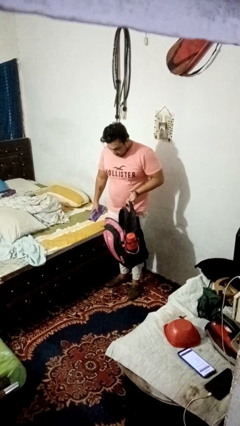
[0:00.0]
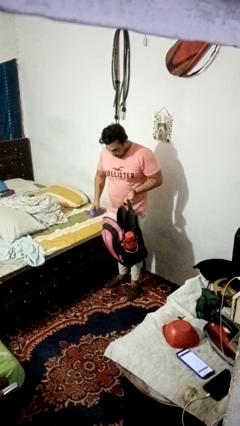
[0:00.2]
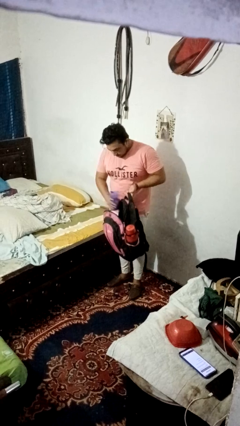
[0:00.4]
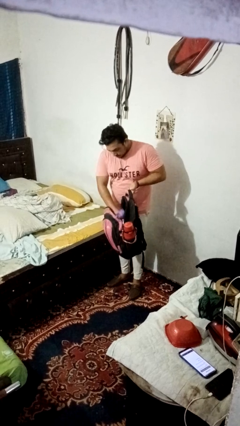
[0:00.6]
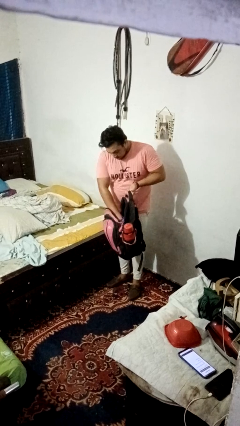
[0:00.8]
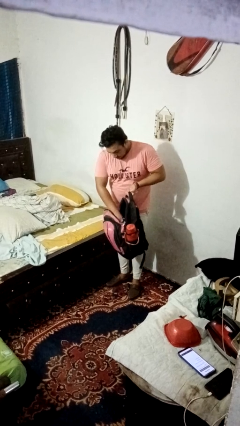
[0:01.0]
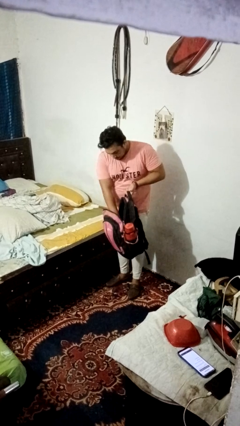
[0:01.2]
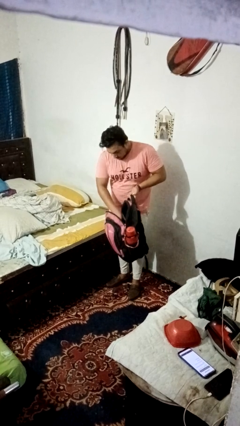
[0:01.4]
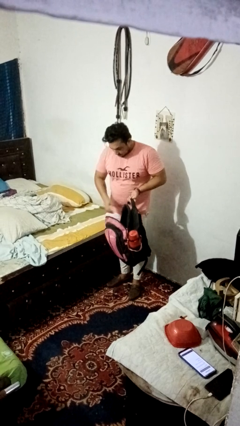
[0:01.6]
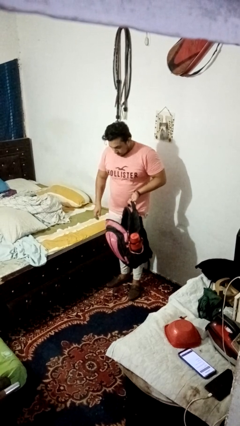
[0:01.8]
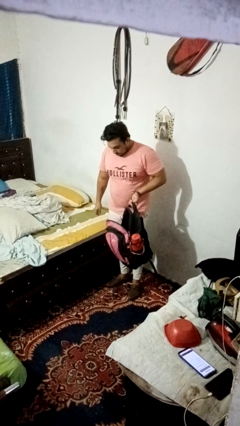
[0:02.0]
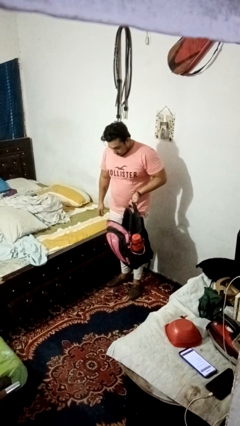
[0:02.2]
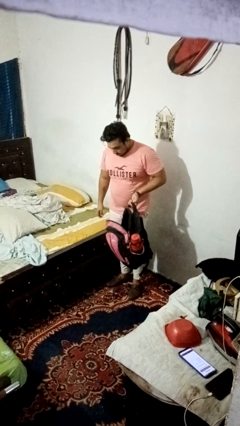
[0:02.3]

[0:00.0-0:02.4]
person puts object into bag

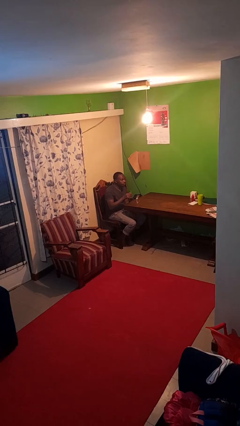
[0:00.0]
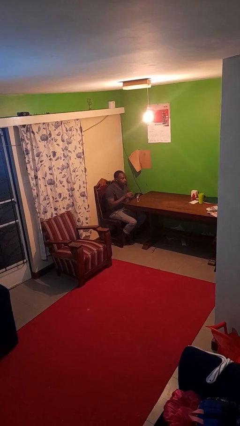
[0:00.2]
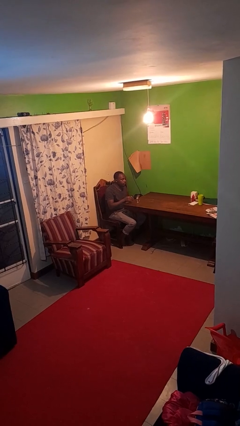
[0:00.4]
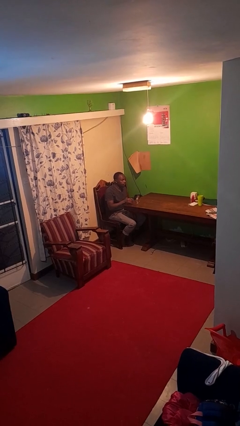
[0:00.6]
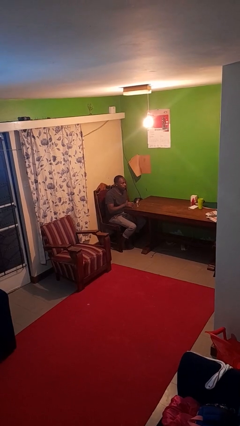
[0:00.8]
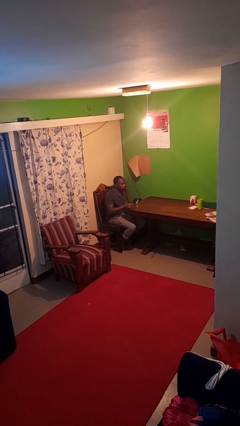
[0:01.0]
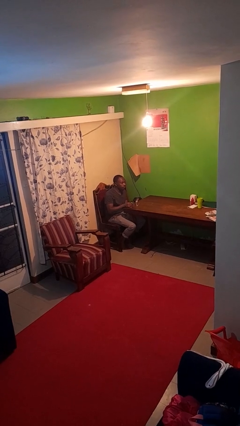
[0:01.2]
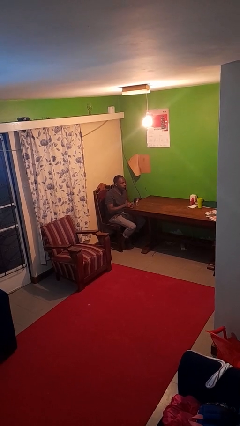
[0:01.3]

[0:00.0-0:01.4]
person puts down object on table

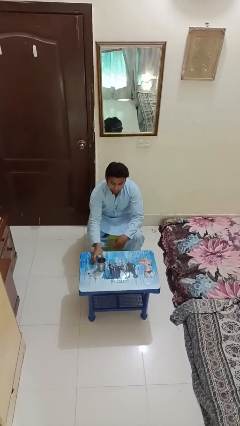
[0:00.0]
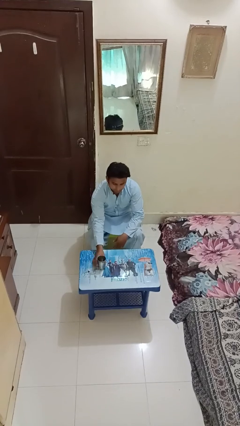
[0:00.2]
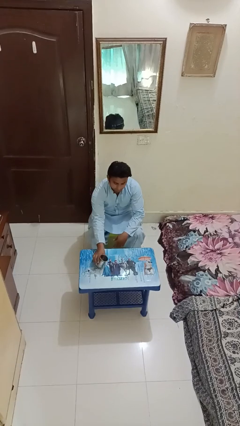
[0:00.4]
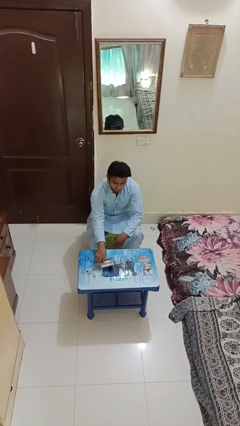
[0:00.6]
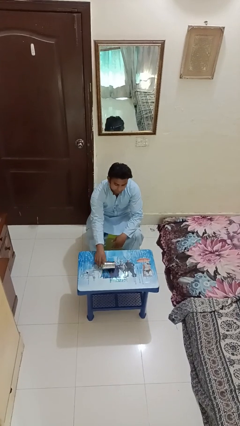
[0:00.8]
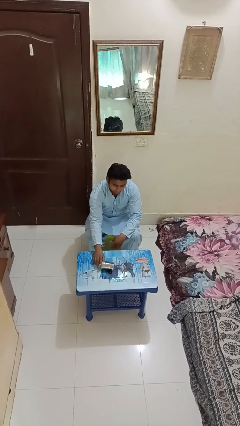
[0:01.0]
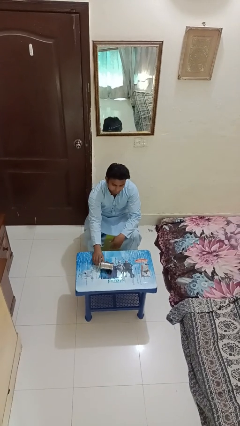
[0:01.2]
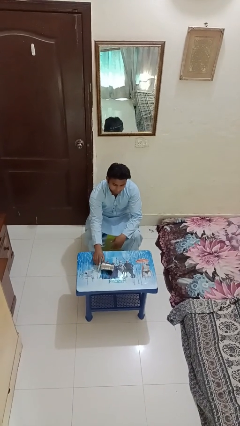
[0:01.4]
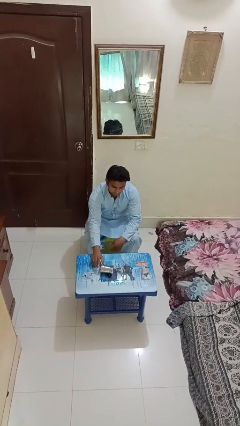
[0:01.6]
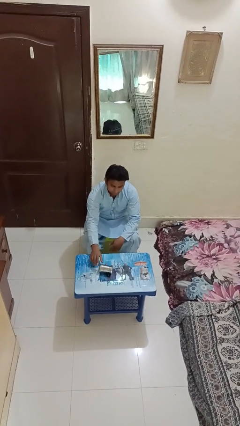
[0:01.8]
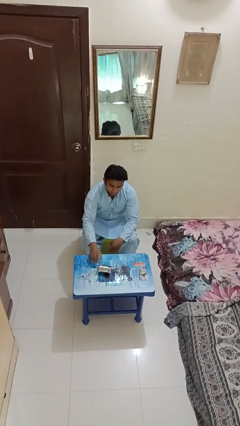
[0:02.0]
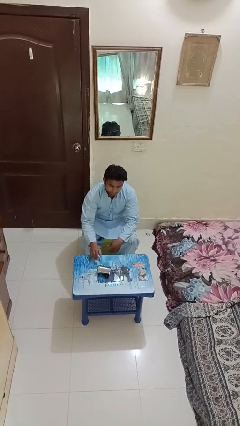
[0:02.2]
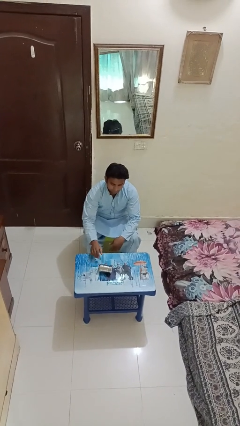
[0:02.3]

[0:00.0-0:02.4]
person knocks over glass

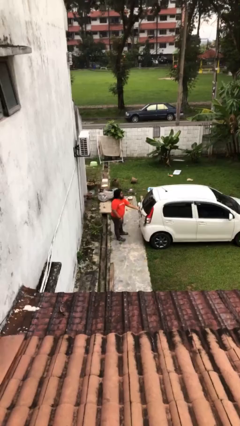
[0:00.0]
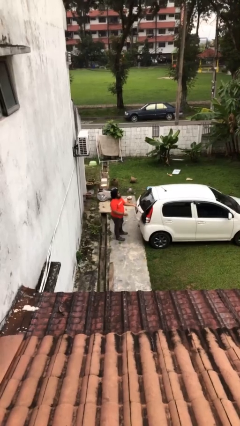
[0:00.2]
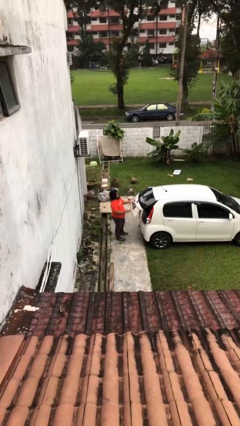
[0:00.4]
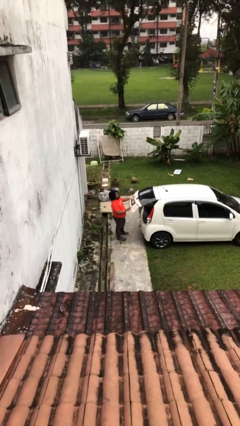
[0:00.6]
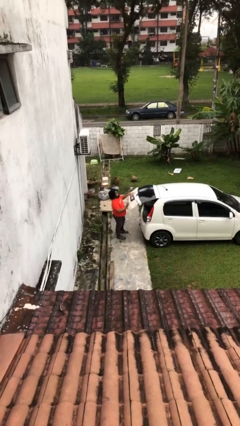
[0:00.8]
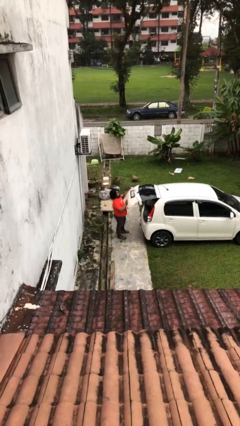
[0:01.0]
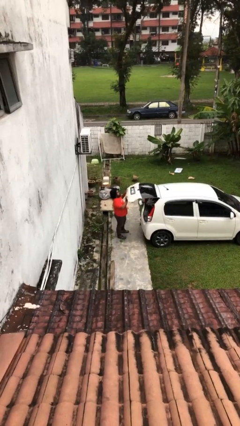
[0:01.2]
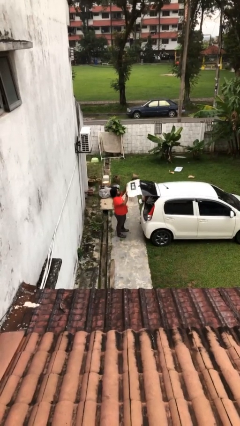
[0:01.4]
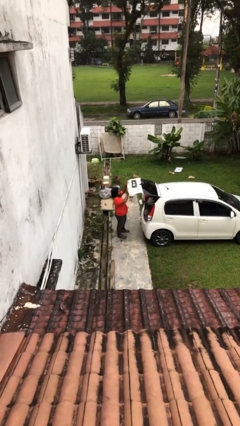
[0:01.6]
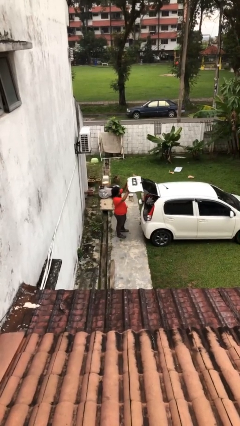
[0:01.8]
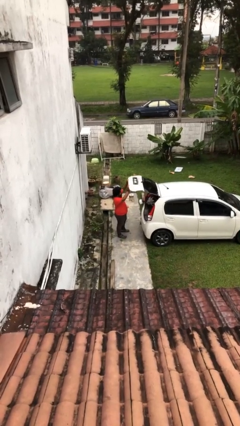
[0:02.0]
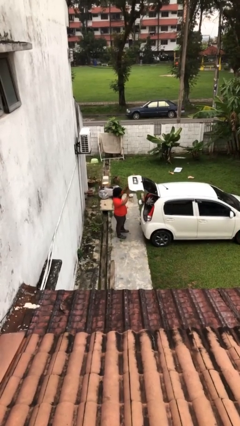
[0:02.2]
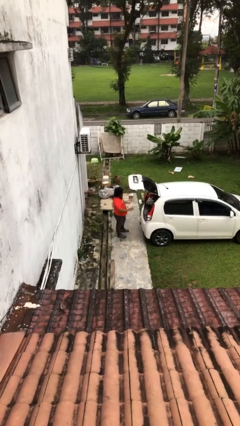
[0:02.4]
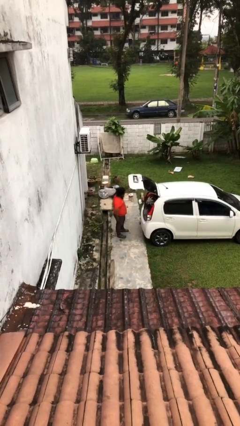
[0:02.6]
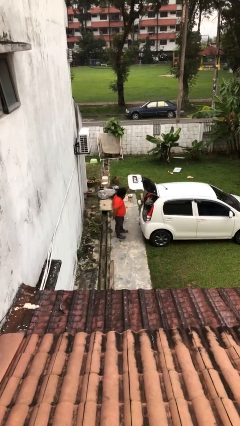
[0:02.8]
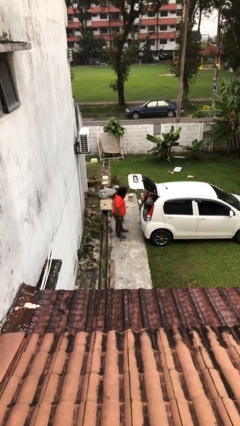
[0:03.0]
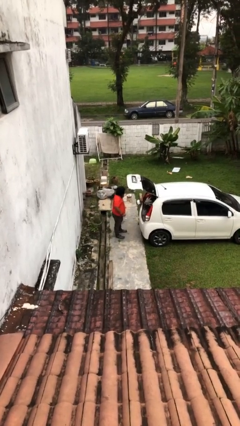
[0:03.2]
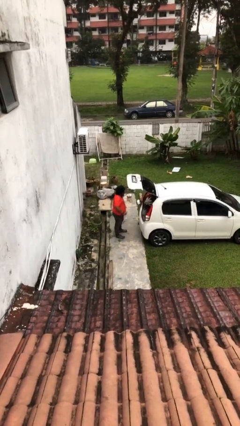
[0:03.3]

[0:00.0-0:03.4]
person opens car trunk

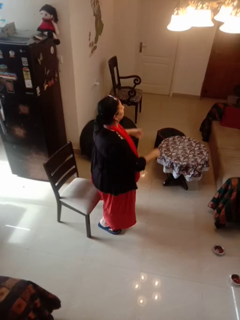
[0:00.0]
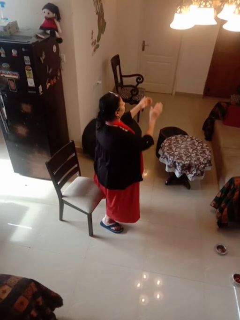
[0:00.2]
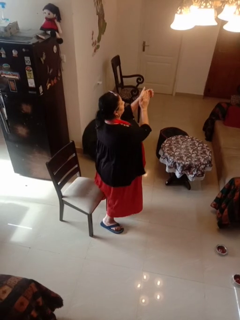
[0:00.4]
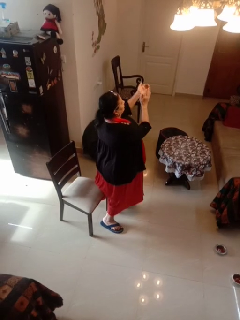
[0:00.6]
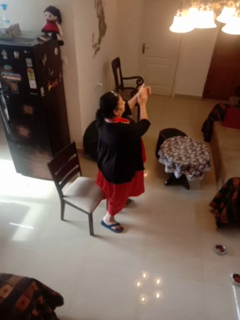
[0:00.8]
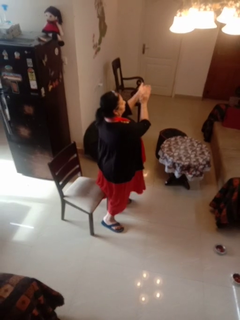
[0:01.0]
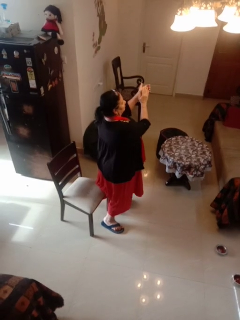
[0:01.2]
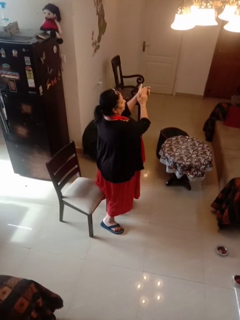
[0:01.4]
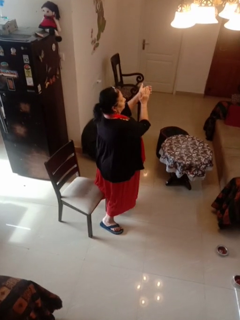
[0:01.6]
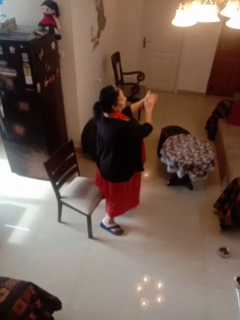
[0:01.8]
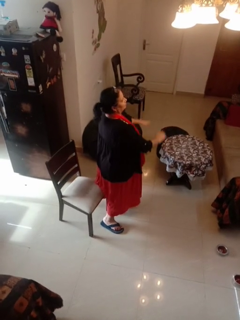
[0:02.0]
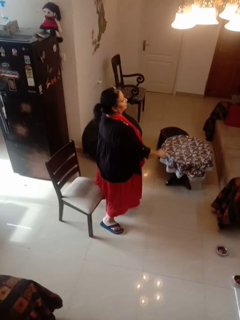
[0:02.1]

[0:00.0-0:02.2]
person claps hands

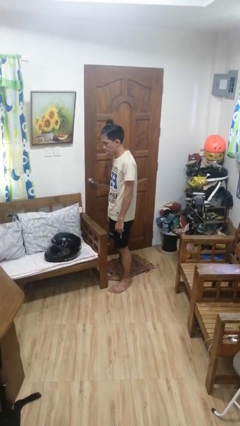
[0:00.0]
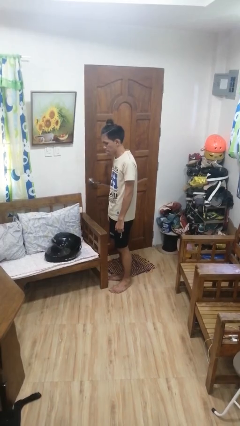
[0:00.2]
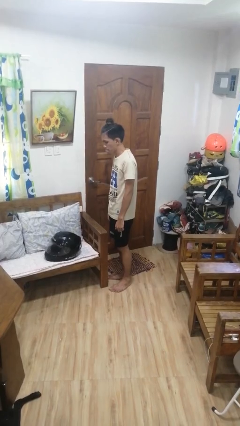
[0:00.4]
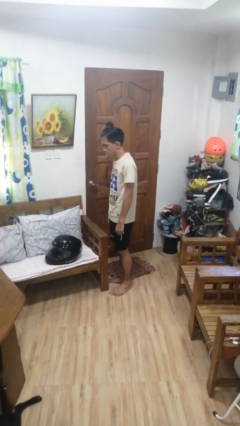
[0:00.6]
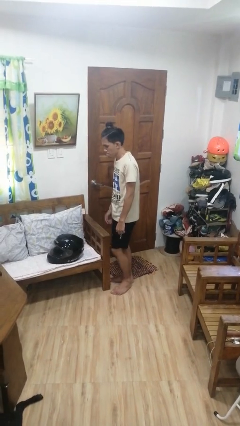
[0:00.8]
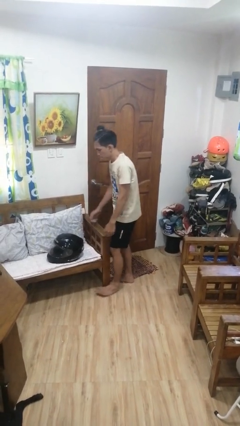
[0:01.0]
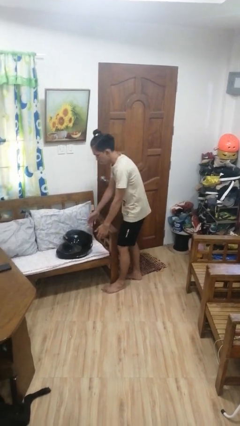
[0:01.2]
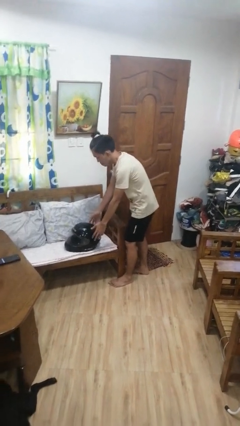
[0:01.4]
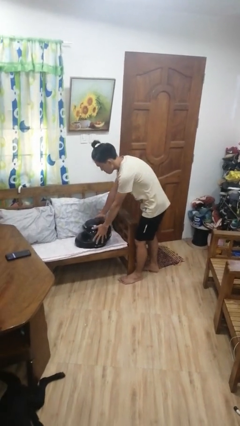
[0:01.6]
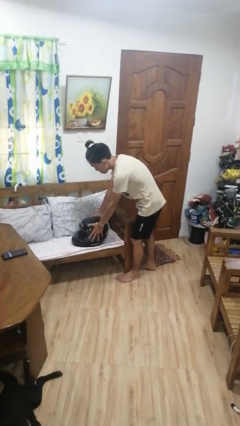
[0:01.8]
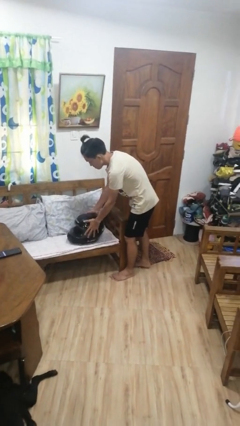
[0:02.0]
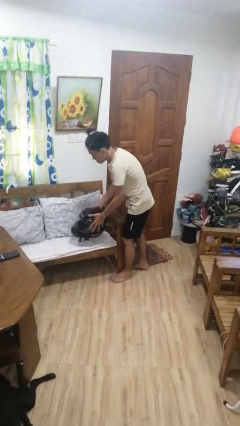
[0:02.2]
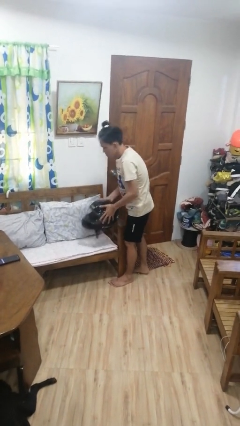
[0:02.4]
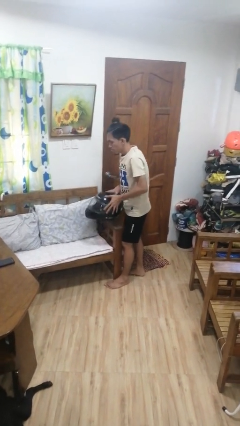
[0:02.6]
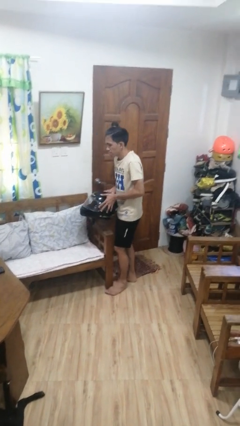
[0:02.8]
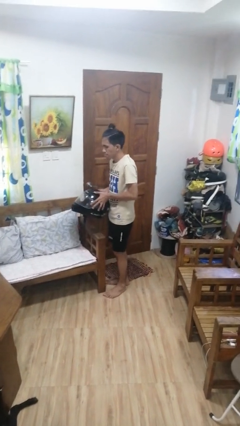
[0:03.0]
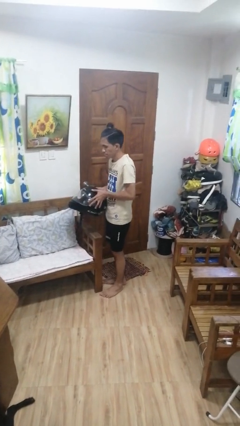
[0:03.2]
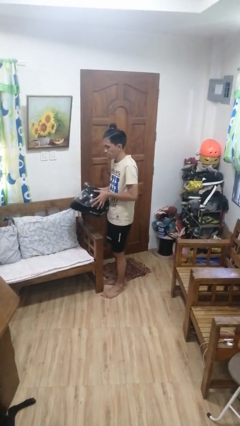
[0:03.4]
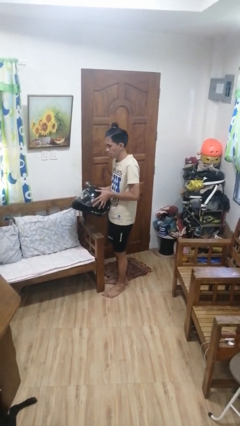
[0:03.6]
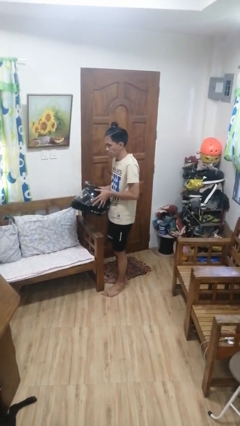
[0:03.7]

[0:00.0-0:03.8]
person picks up object from couch

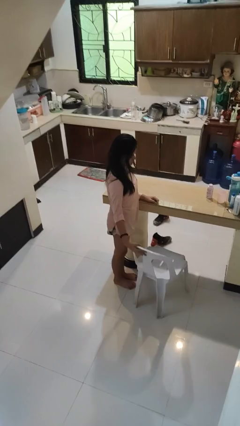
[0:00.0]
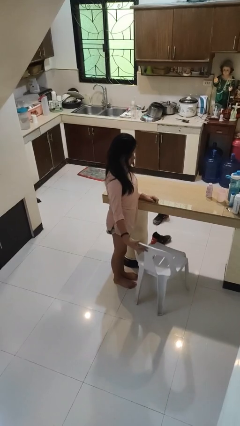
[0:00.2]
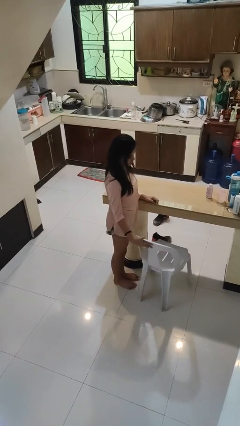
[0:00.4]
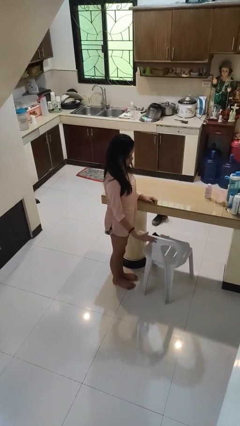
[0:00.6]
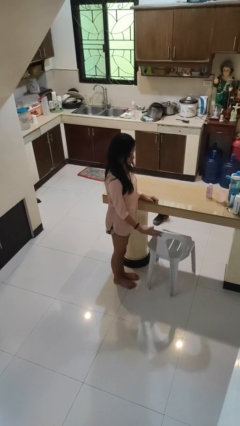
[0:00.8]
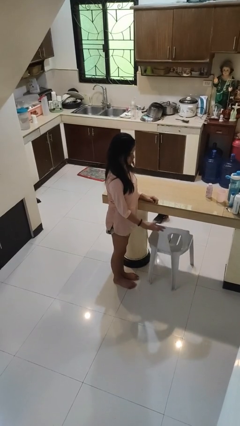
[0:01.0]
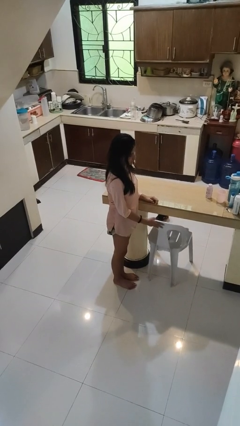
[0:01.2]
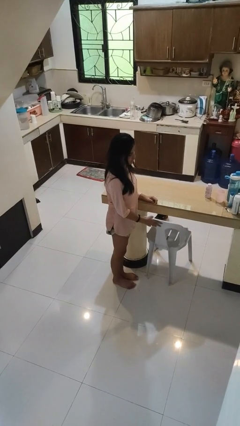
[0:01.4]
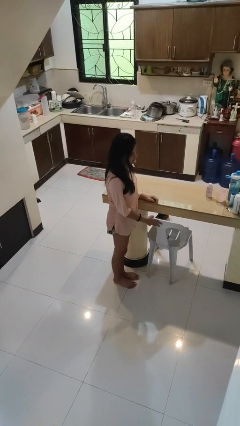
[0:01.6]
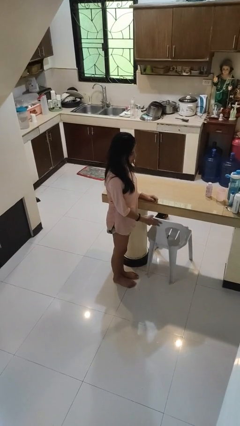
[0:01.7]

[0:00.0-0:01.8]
person pushes in chair

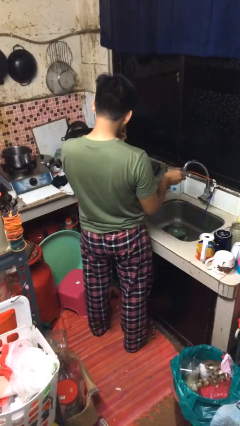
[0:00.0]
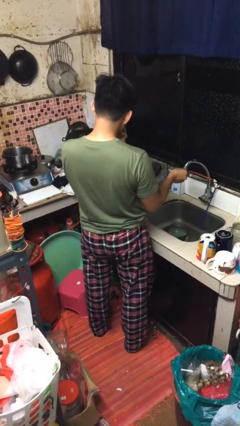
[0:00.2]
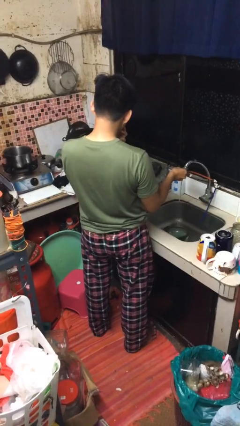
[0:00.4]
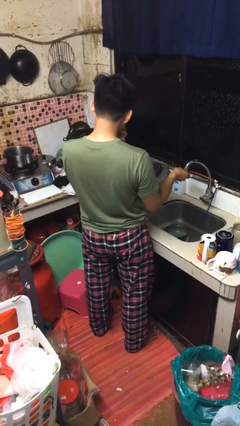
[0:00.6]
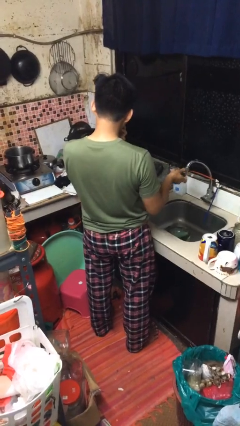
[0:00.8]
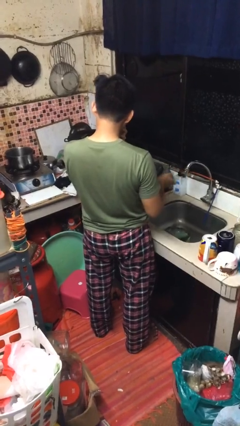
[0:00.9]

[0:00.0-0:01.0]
person turns off faucet
